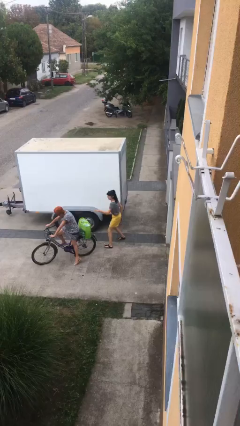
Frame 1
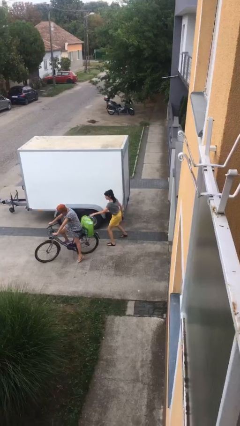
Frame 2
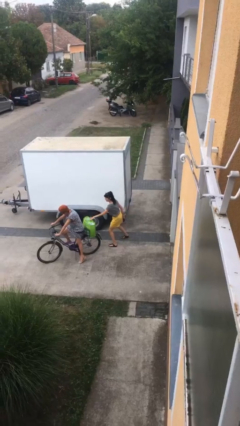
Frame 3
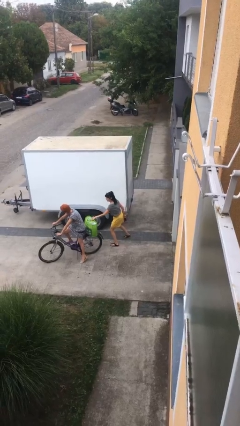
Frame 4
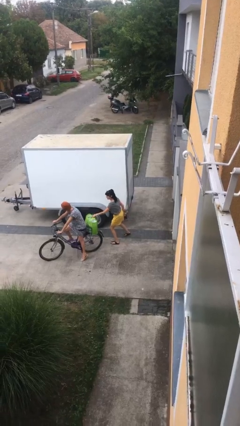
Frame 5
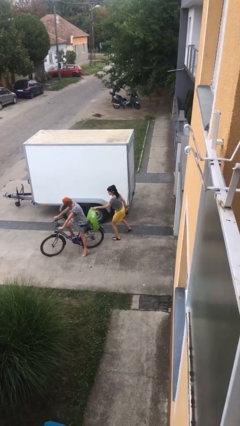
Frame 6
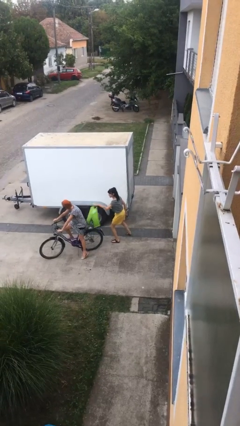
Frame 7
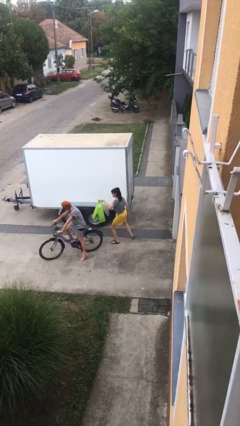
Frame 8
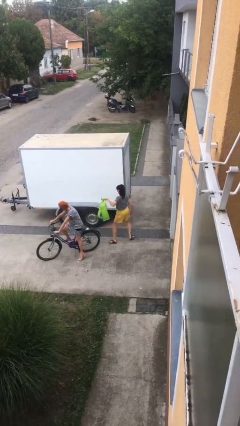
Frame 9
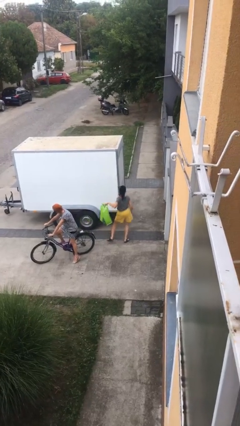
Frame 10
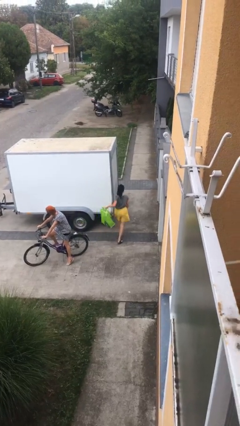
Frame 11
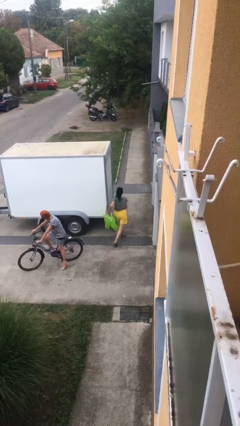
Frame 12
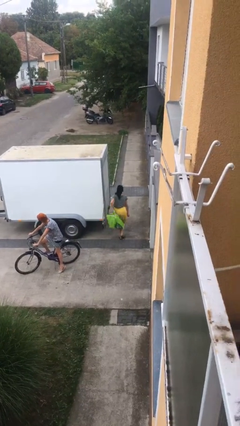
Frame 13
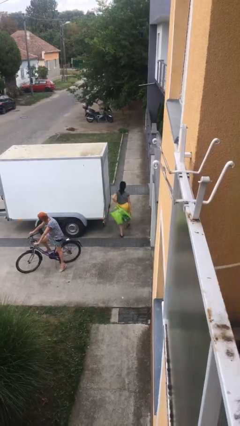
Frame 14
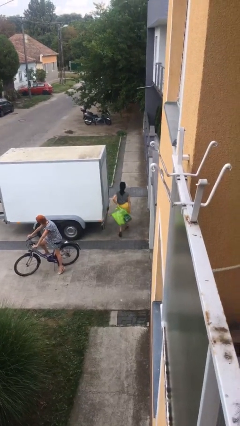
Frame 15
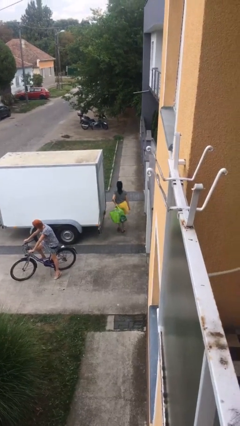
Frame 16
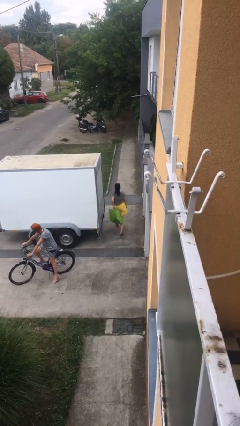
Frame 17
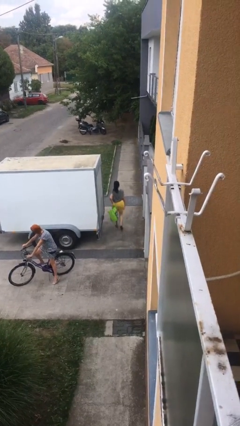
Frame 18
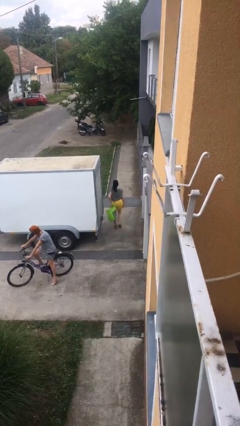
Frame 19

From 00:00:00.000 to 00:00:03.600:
person steals object from person

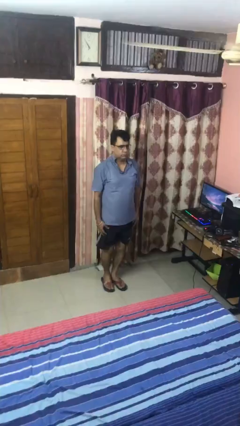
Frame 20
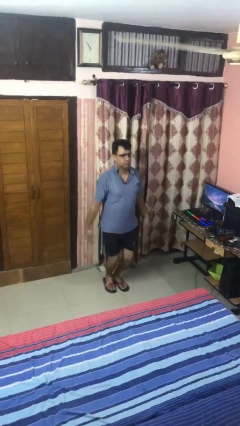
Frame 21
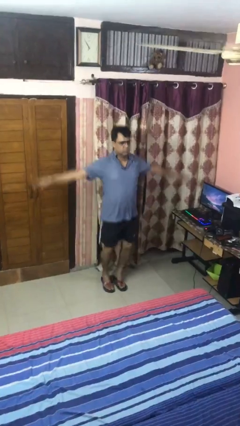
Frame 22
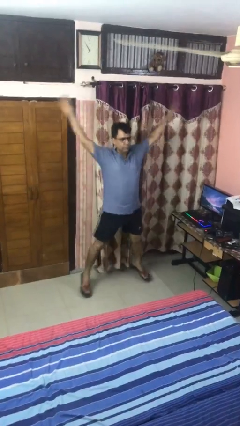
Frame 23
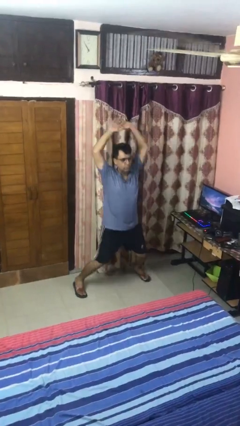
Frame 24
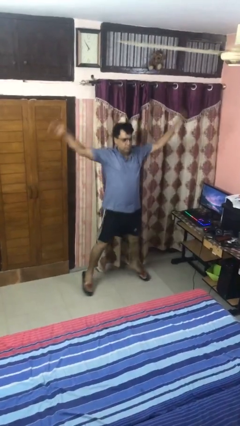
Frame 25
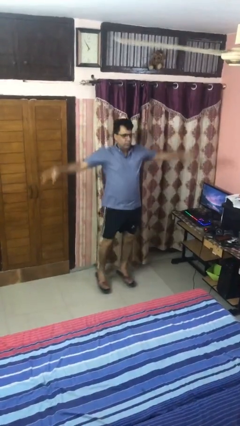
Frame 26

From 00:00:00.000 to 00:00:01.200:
person exercises with jumping jacks

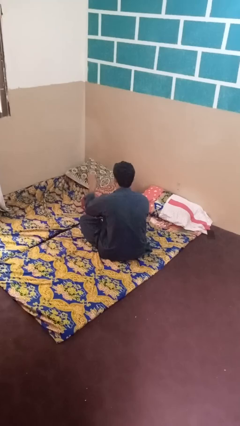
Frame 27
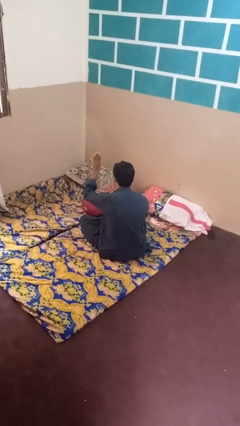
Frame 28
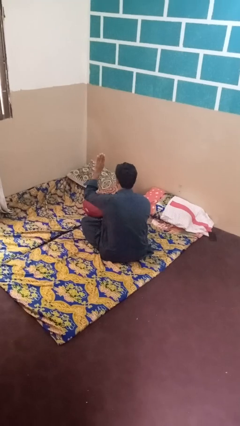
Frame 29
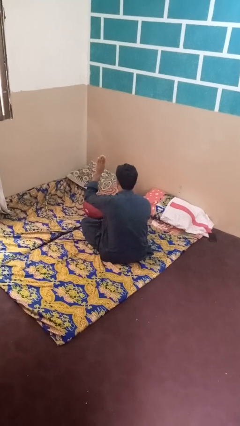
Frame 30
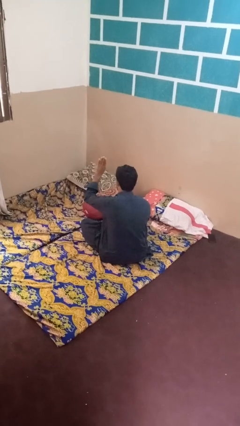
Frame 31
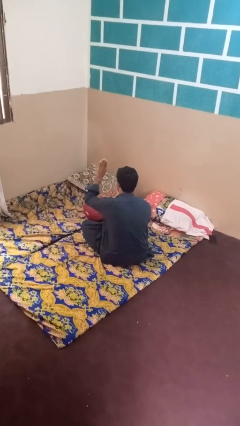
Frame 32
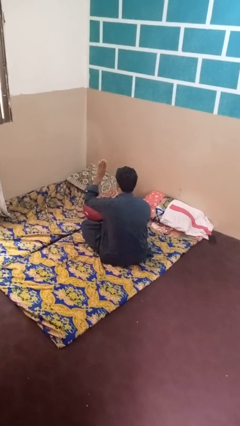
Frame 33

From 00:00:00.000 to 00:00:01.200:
person gestures number four

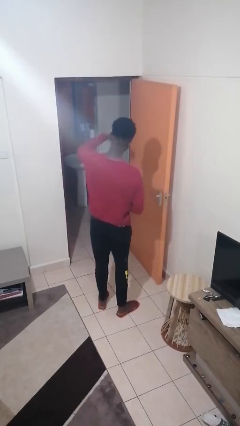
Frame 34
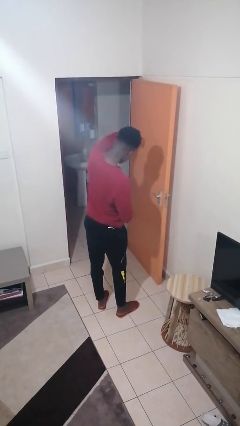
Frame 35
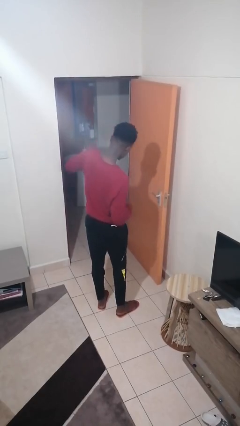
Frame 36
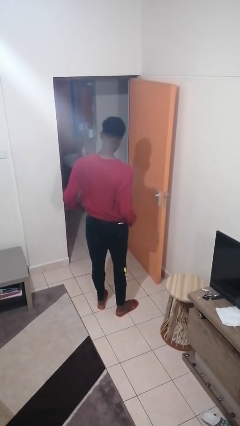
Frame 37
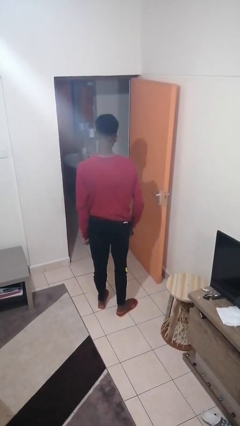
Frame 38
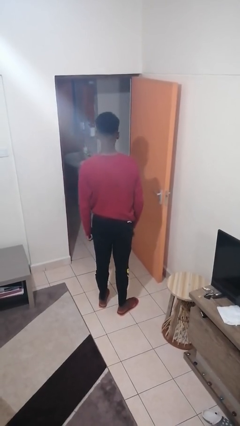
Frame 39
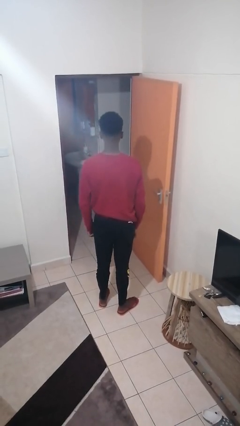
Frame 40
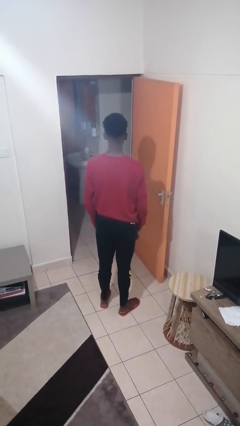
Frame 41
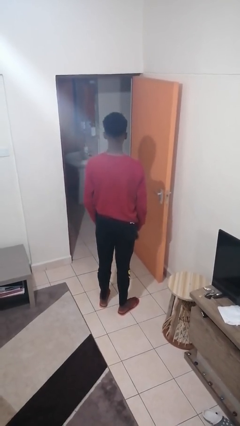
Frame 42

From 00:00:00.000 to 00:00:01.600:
person punches

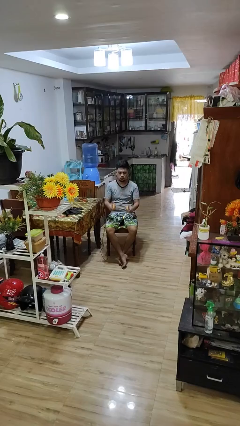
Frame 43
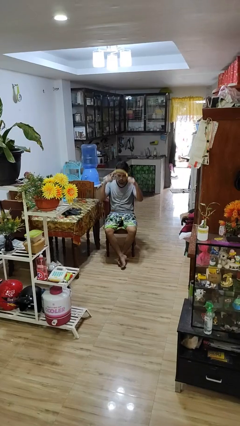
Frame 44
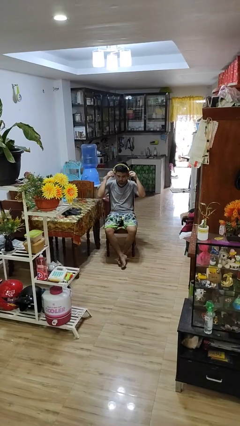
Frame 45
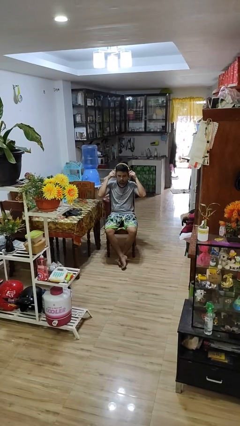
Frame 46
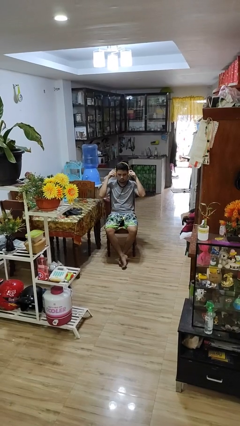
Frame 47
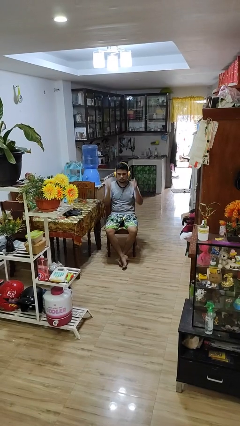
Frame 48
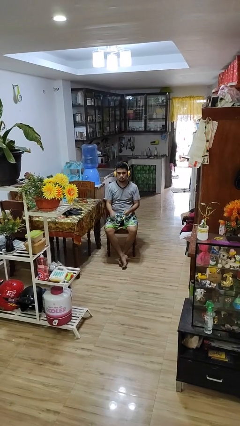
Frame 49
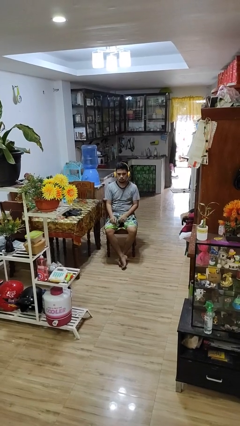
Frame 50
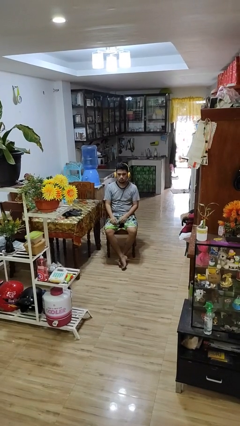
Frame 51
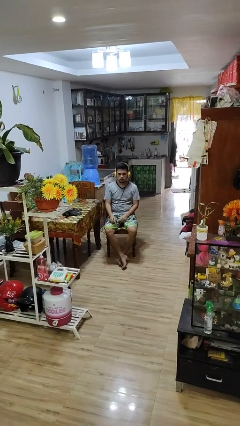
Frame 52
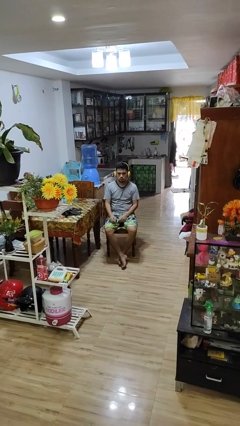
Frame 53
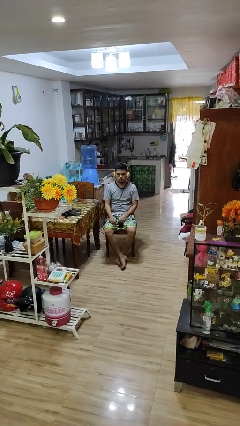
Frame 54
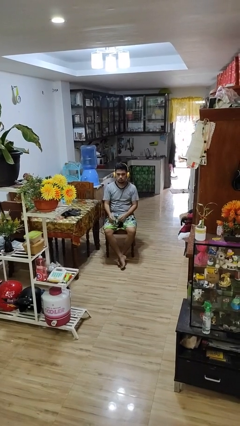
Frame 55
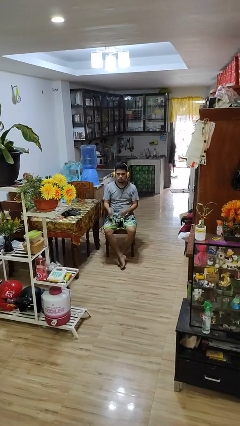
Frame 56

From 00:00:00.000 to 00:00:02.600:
person puts on headphones

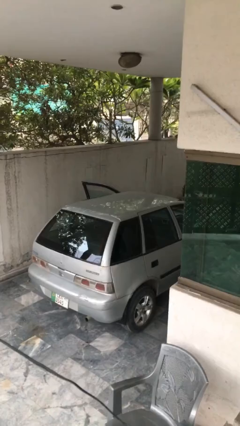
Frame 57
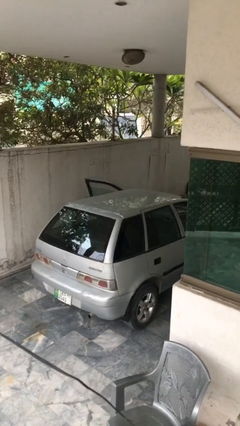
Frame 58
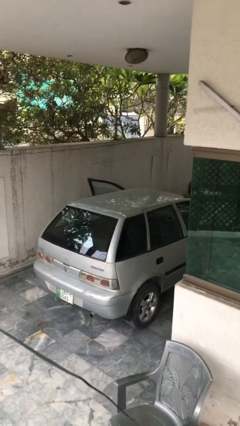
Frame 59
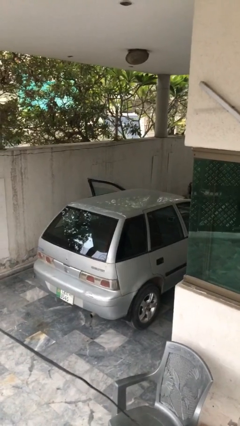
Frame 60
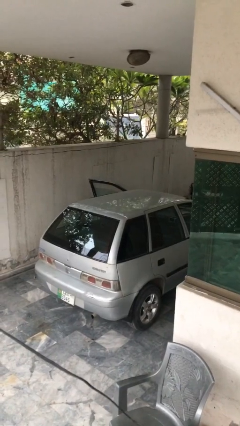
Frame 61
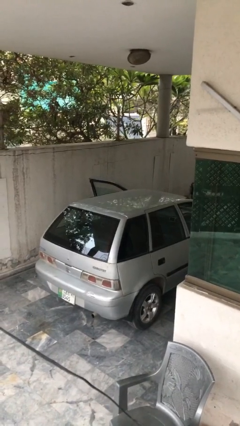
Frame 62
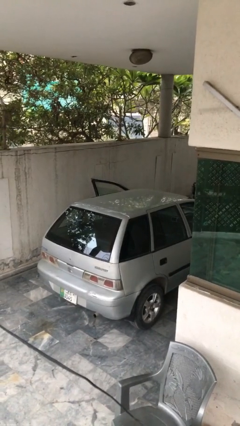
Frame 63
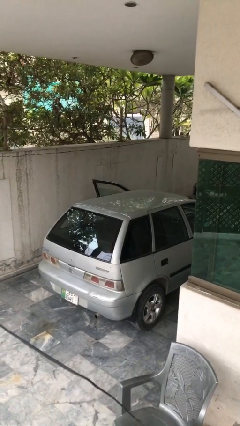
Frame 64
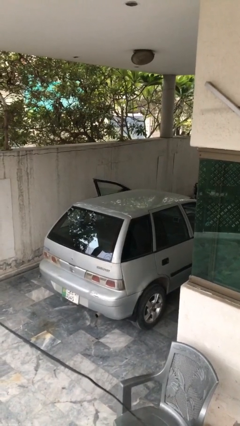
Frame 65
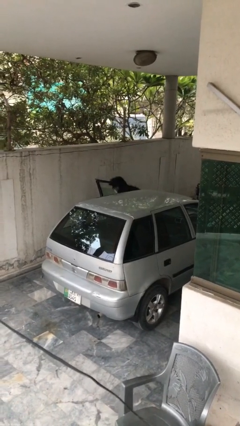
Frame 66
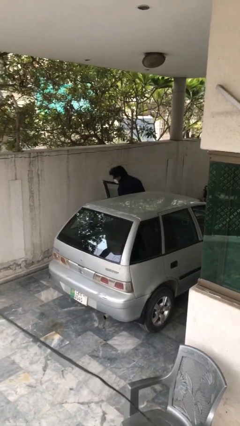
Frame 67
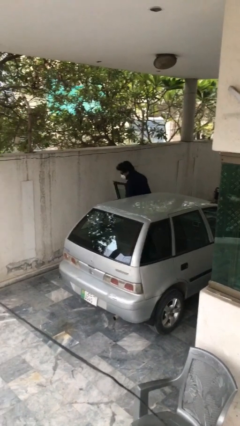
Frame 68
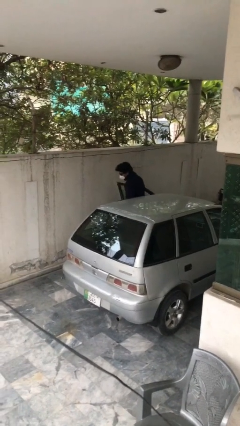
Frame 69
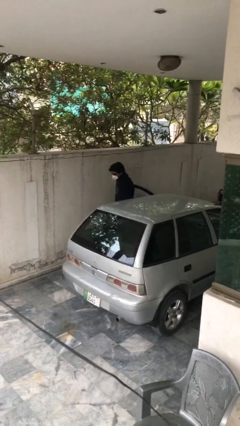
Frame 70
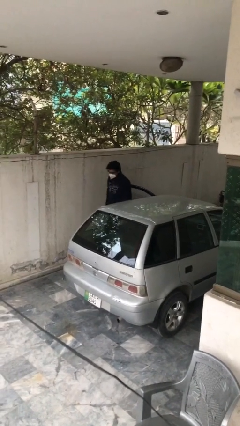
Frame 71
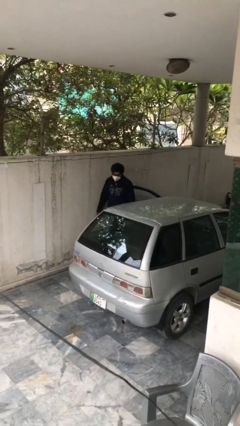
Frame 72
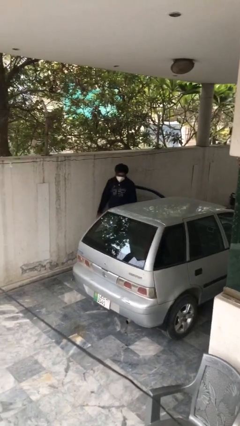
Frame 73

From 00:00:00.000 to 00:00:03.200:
person exits car

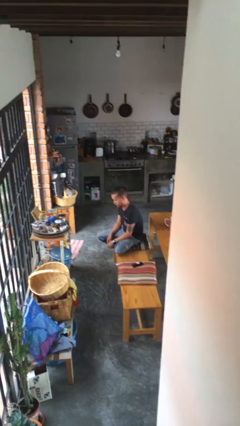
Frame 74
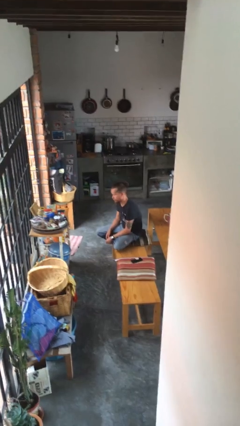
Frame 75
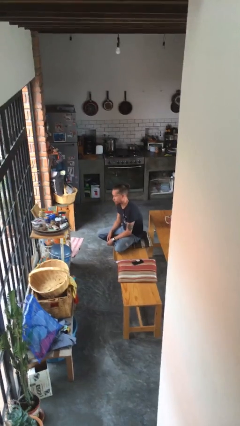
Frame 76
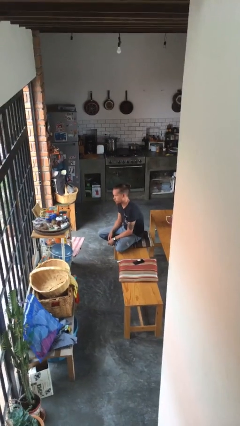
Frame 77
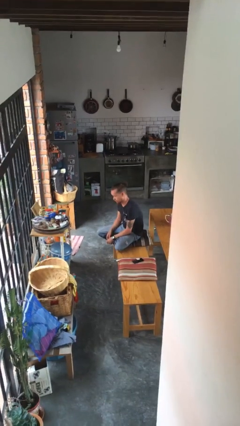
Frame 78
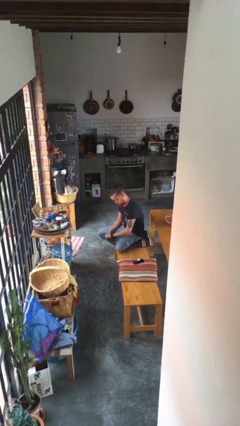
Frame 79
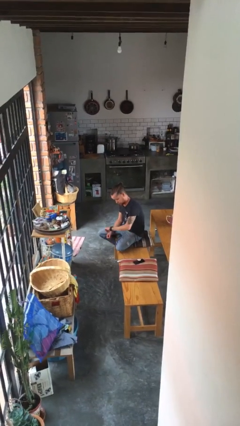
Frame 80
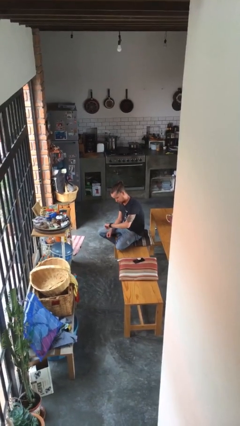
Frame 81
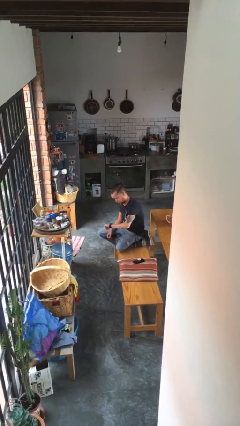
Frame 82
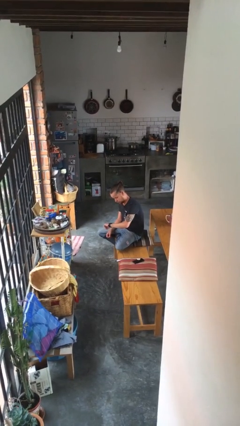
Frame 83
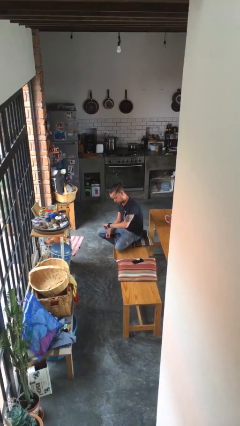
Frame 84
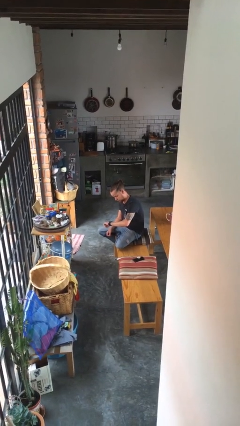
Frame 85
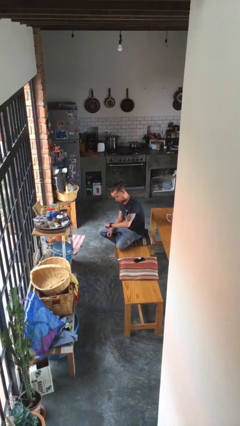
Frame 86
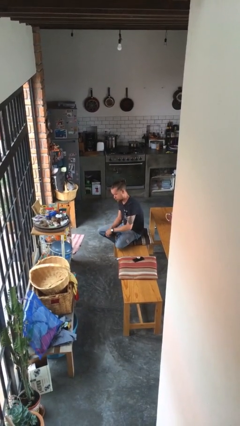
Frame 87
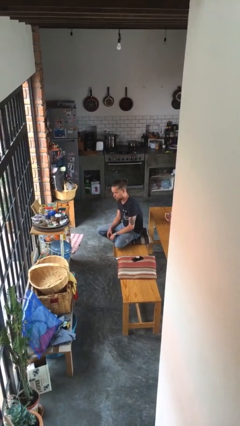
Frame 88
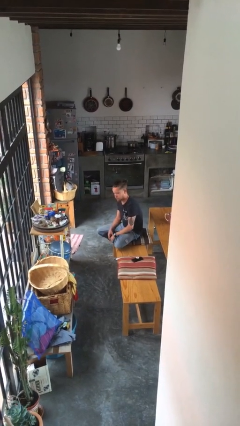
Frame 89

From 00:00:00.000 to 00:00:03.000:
person looks at wristwatch

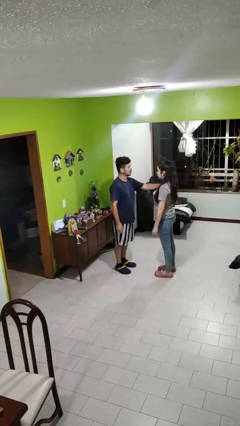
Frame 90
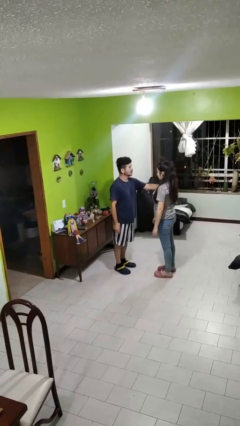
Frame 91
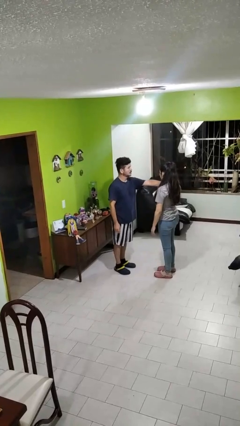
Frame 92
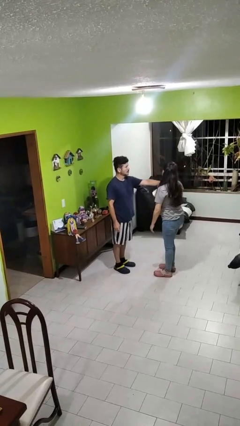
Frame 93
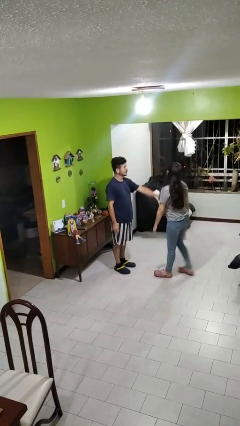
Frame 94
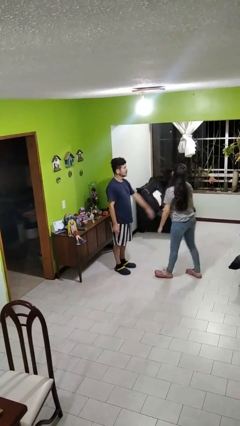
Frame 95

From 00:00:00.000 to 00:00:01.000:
person shoves person
